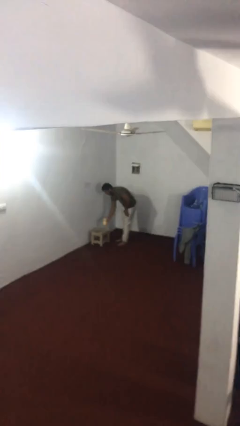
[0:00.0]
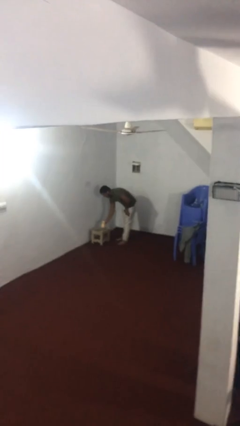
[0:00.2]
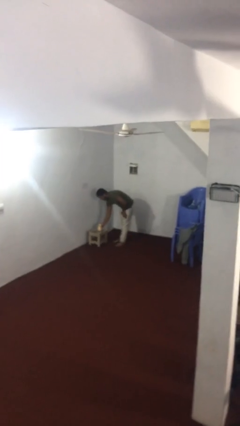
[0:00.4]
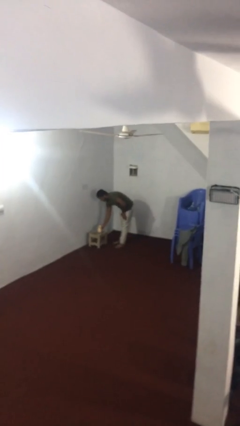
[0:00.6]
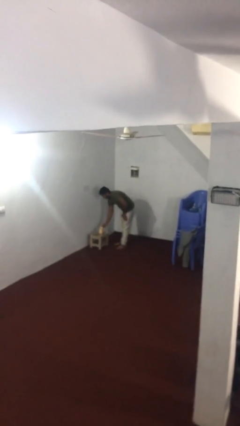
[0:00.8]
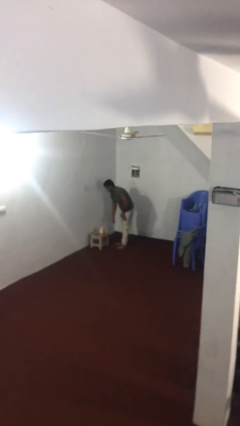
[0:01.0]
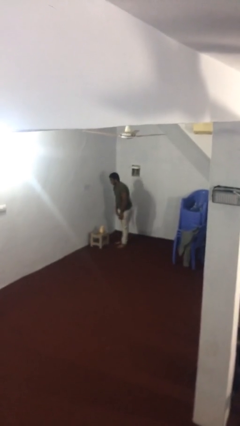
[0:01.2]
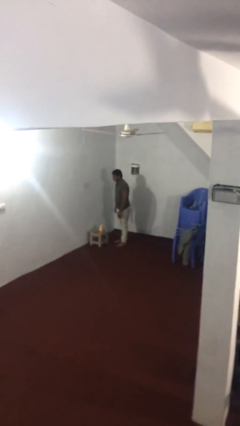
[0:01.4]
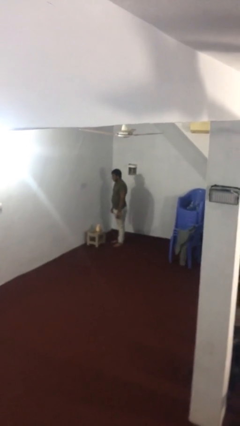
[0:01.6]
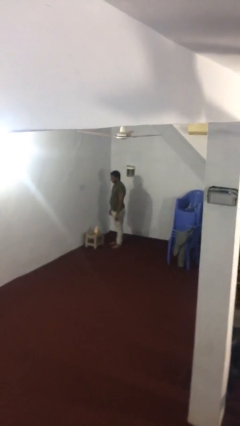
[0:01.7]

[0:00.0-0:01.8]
person puts down object on table

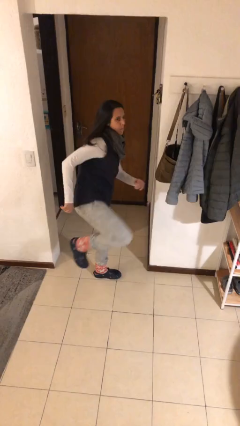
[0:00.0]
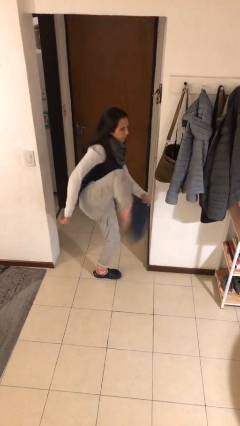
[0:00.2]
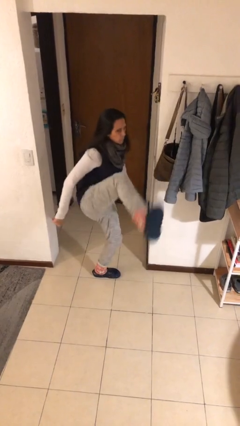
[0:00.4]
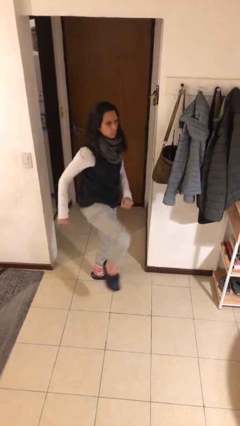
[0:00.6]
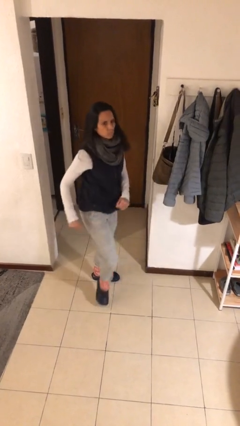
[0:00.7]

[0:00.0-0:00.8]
person karate kicks

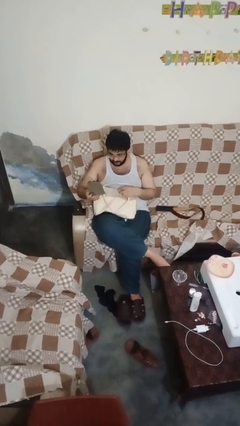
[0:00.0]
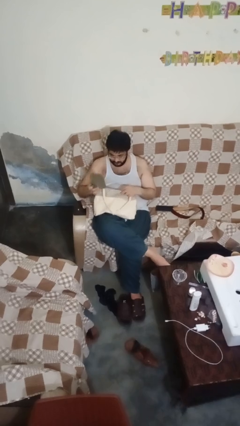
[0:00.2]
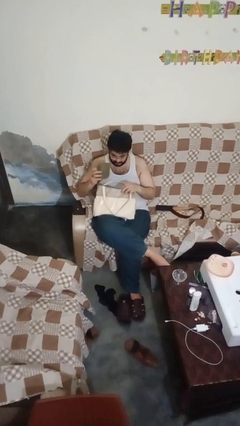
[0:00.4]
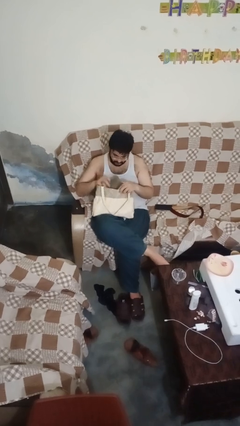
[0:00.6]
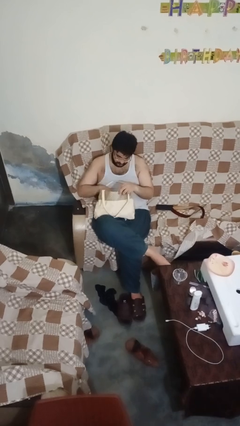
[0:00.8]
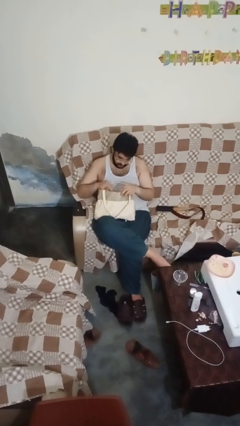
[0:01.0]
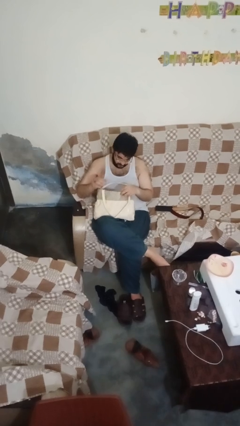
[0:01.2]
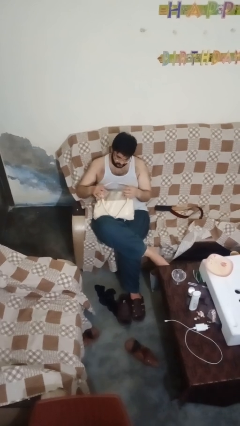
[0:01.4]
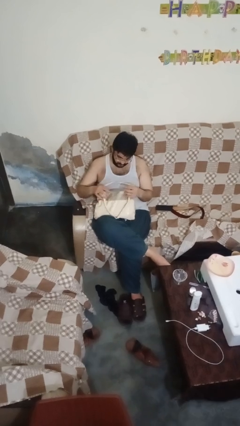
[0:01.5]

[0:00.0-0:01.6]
person puts object into purse

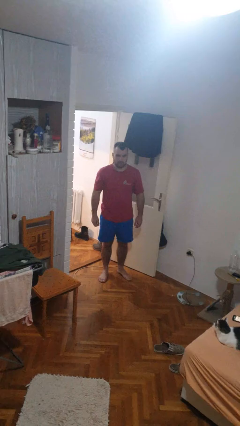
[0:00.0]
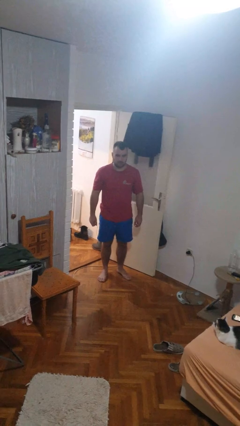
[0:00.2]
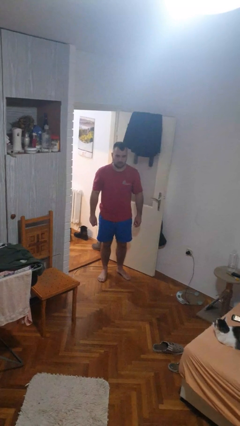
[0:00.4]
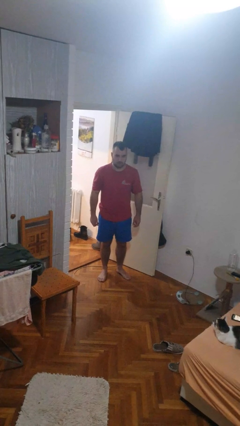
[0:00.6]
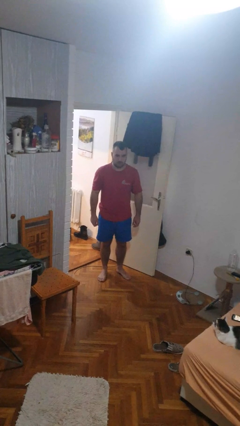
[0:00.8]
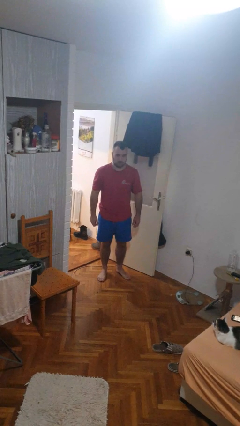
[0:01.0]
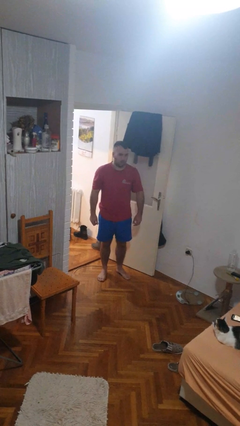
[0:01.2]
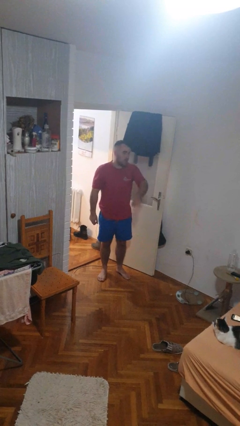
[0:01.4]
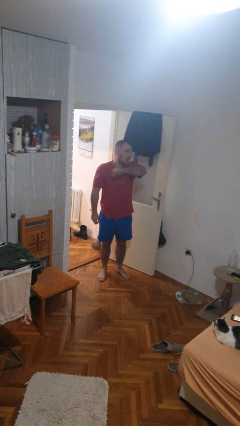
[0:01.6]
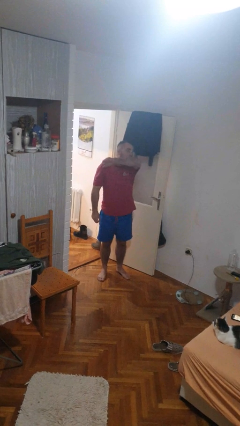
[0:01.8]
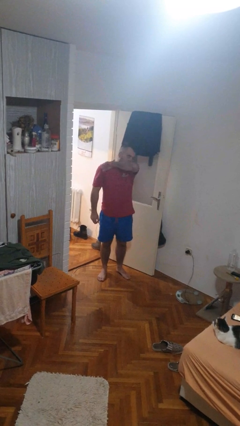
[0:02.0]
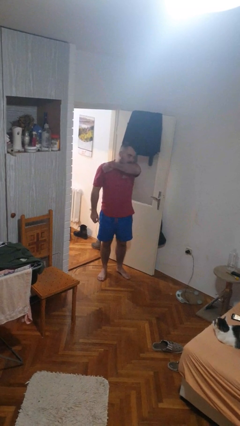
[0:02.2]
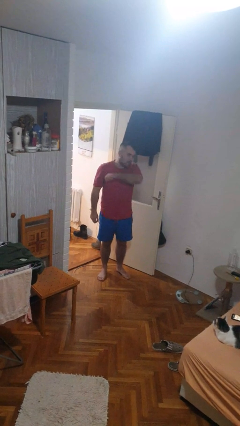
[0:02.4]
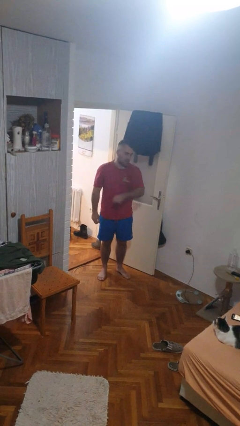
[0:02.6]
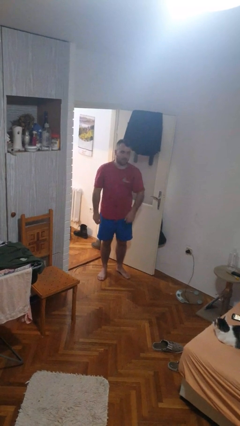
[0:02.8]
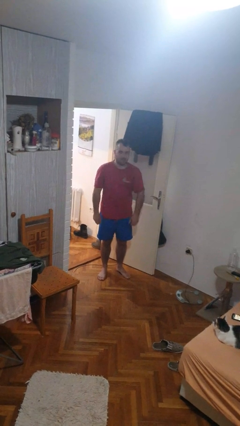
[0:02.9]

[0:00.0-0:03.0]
person sneezes into arm

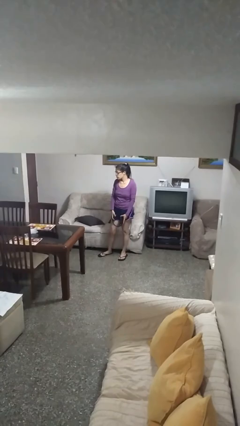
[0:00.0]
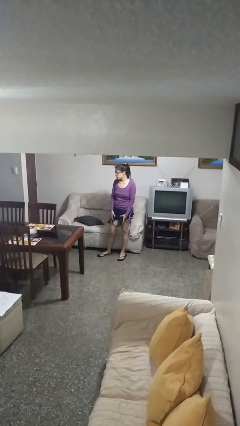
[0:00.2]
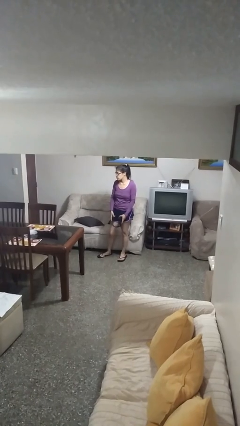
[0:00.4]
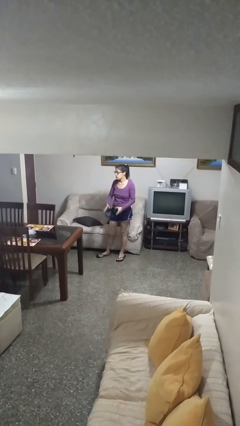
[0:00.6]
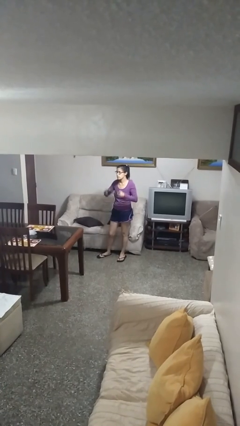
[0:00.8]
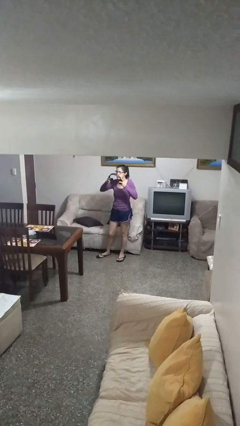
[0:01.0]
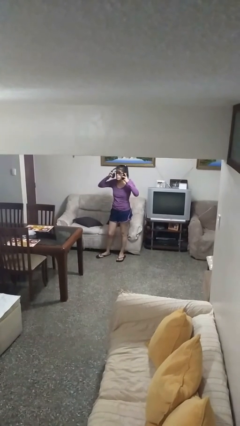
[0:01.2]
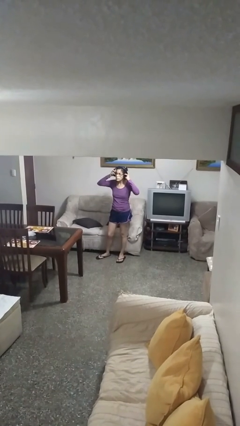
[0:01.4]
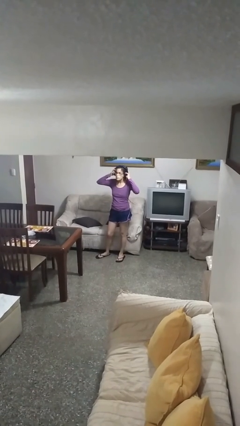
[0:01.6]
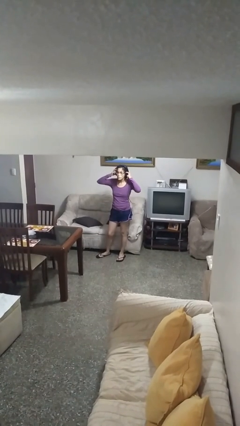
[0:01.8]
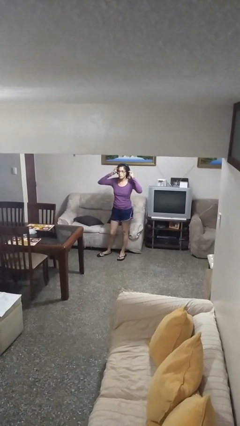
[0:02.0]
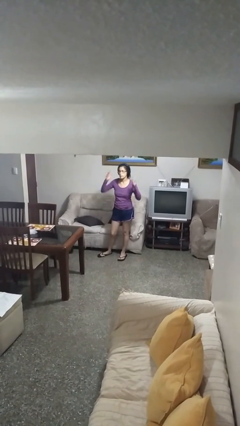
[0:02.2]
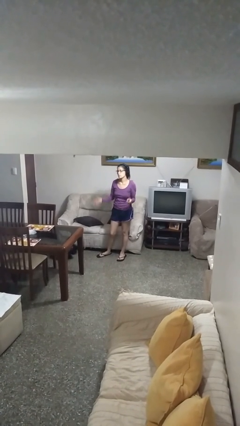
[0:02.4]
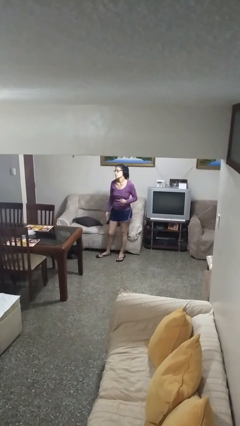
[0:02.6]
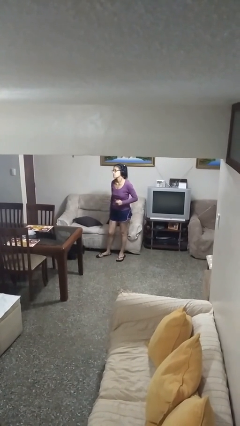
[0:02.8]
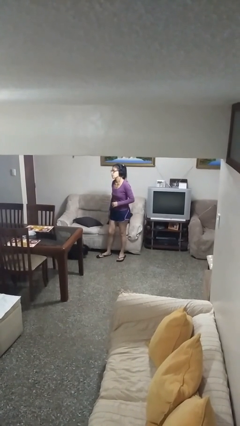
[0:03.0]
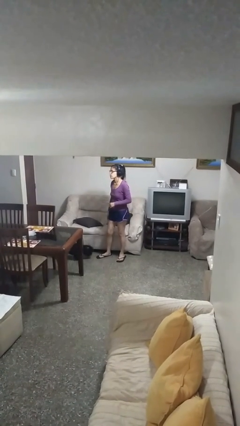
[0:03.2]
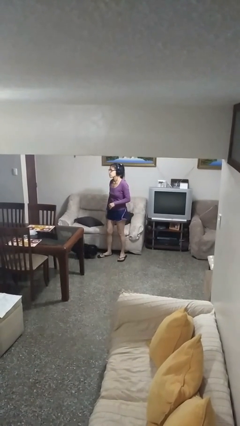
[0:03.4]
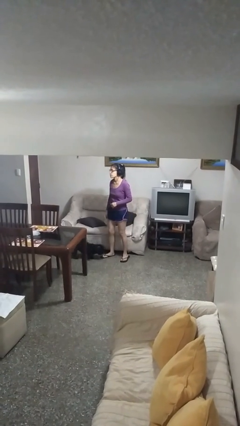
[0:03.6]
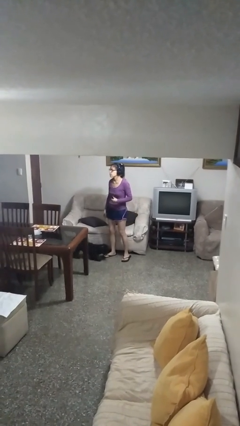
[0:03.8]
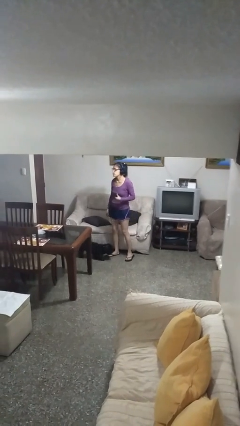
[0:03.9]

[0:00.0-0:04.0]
person puts on headphones

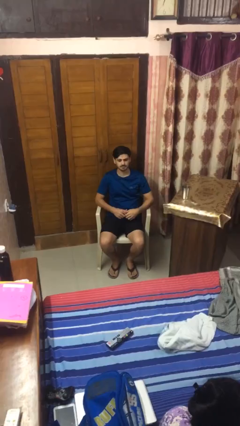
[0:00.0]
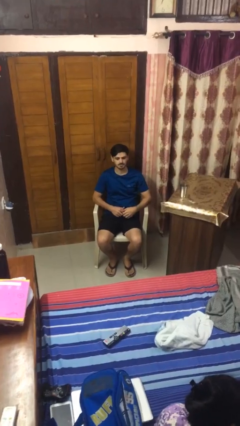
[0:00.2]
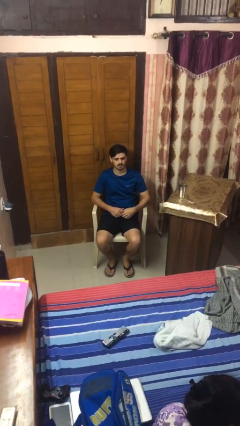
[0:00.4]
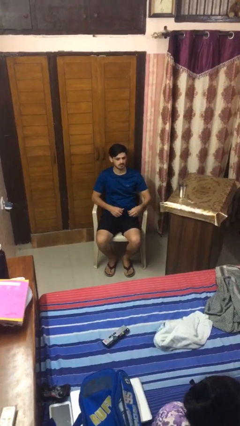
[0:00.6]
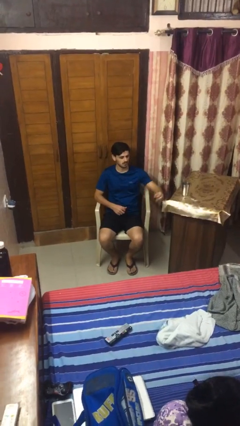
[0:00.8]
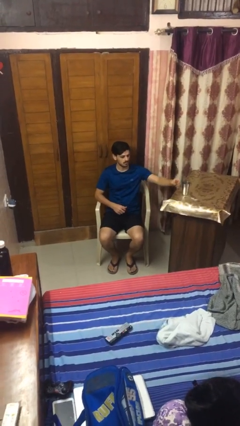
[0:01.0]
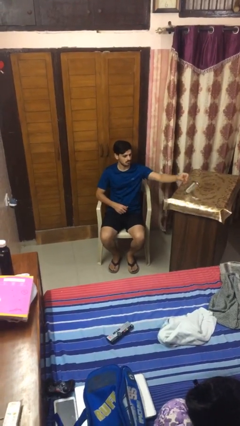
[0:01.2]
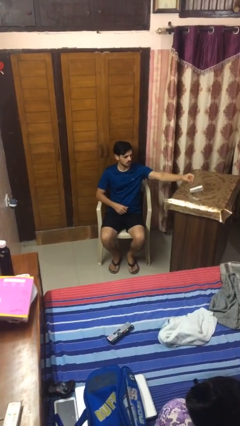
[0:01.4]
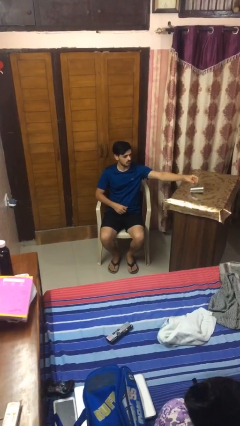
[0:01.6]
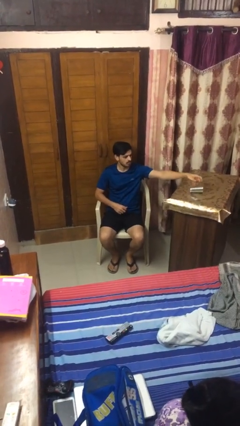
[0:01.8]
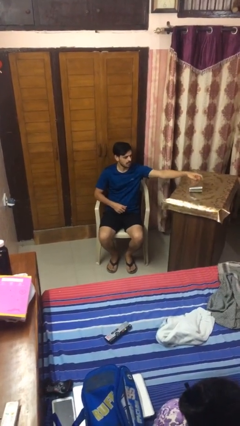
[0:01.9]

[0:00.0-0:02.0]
person knocks over glass

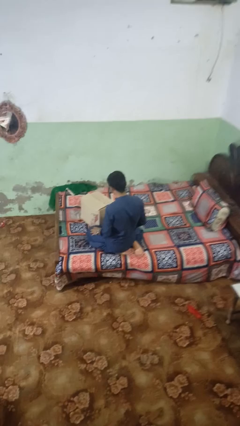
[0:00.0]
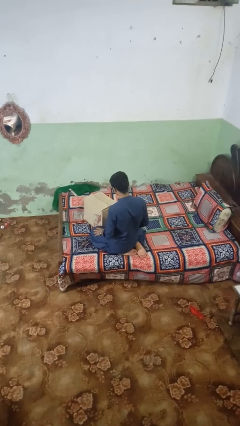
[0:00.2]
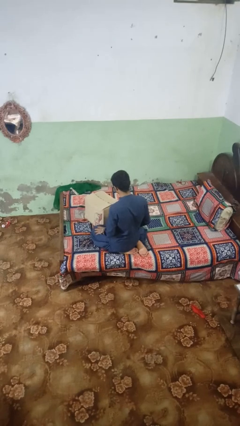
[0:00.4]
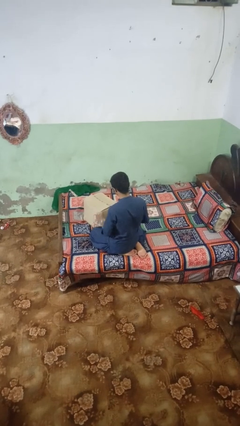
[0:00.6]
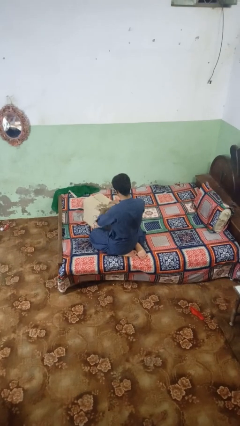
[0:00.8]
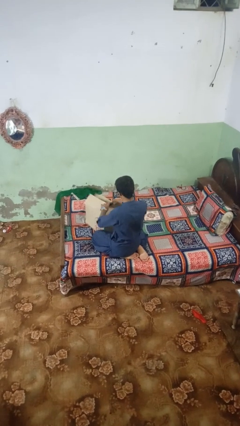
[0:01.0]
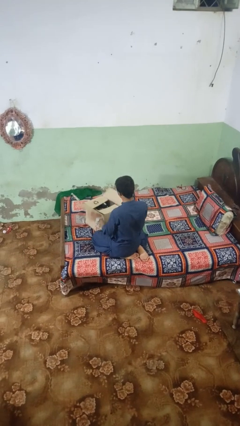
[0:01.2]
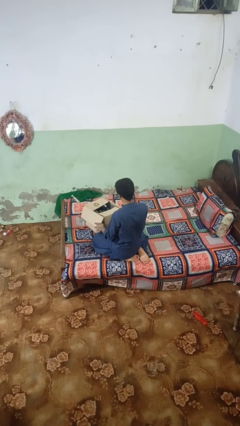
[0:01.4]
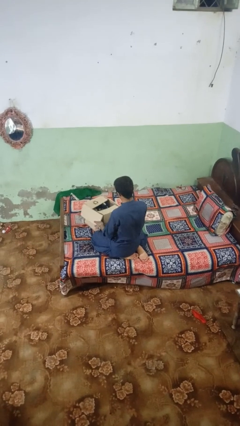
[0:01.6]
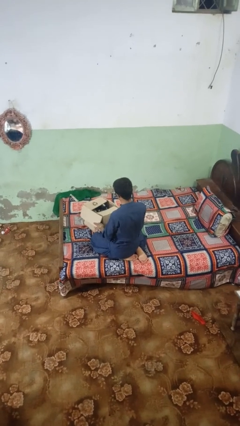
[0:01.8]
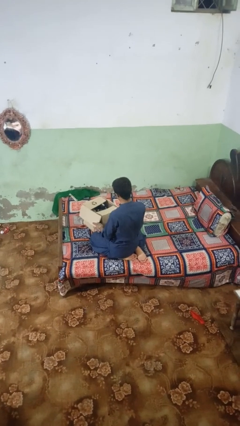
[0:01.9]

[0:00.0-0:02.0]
person opens box

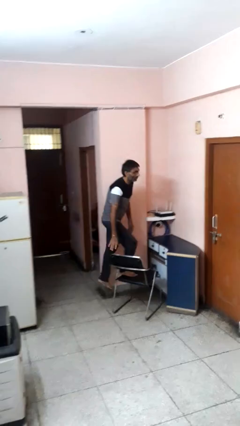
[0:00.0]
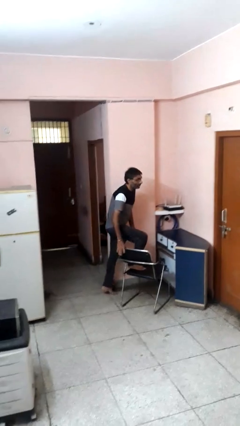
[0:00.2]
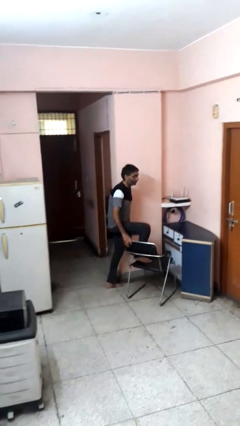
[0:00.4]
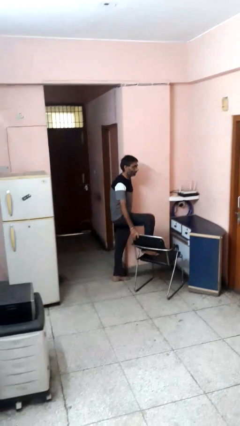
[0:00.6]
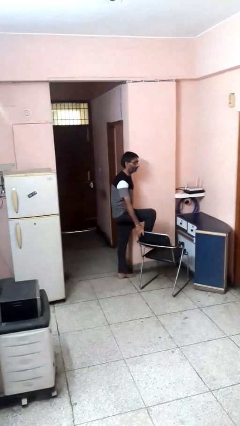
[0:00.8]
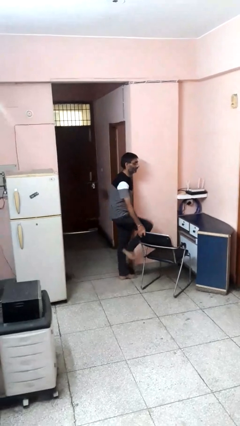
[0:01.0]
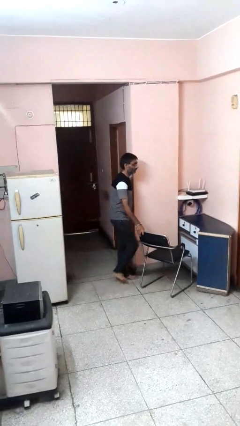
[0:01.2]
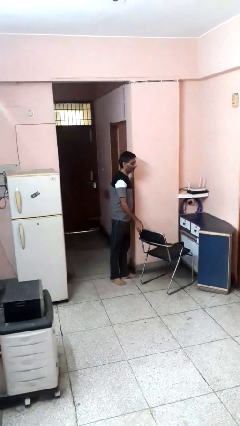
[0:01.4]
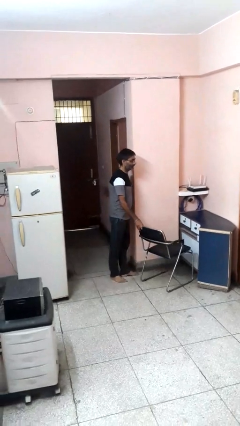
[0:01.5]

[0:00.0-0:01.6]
person climbs off chair
